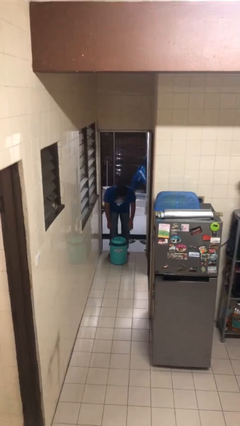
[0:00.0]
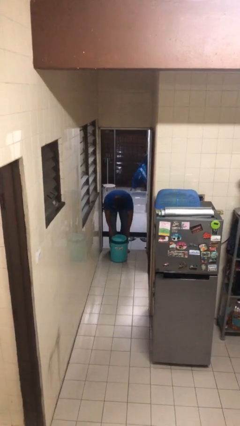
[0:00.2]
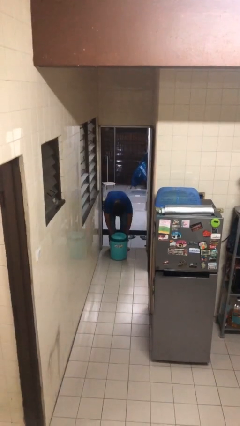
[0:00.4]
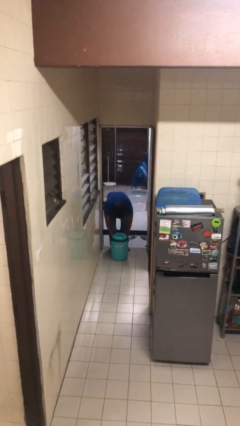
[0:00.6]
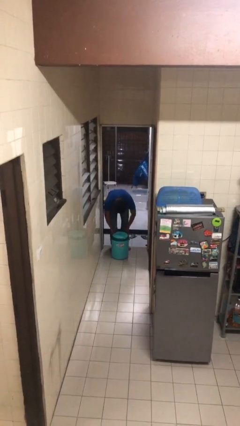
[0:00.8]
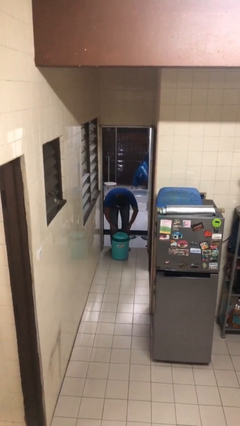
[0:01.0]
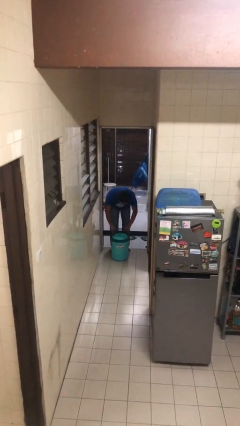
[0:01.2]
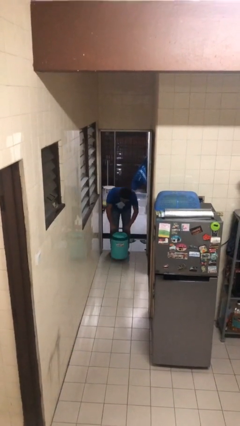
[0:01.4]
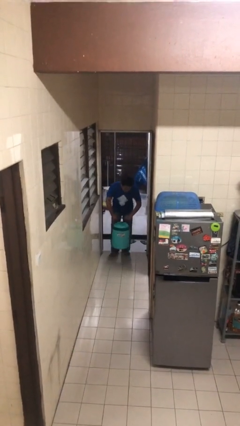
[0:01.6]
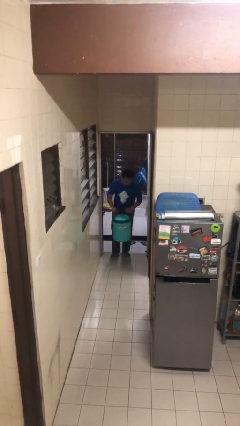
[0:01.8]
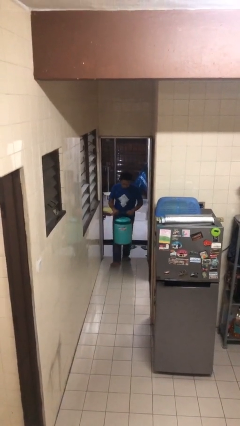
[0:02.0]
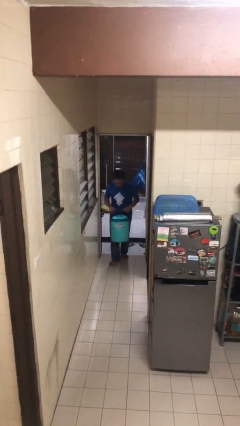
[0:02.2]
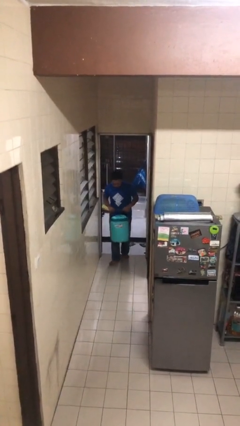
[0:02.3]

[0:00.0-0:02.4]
person picks up object from floor

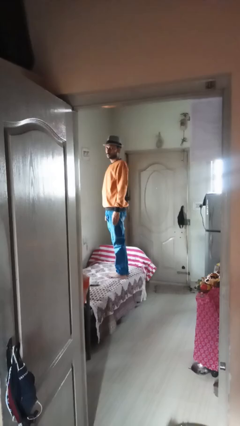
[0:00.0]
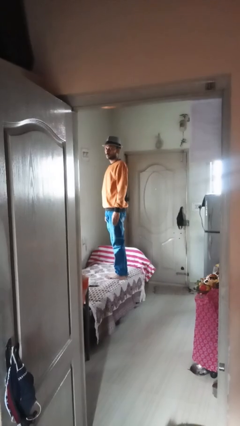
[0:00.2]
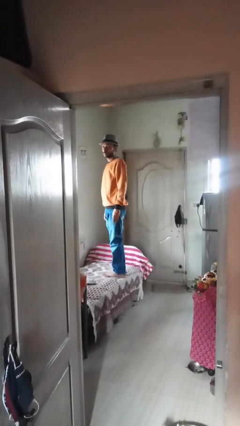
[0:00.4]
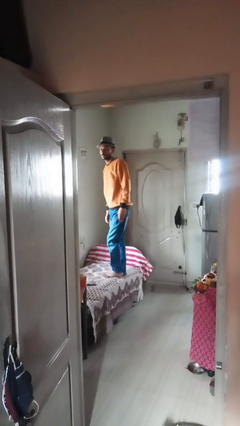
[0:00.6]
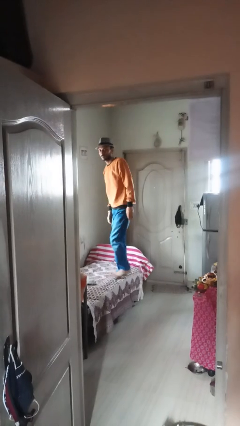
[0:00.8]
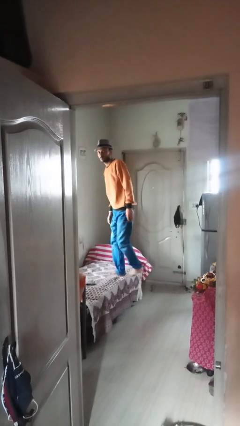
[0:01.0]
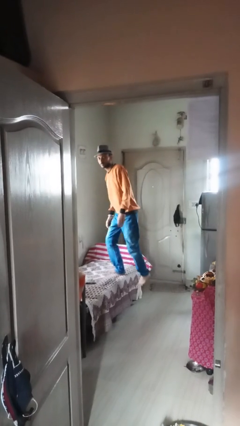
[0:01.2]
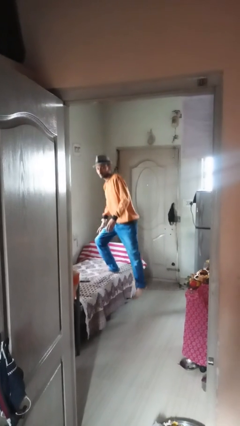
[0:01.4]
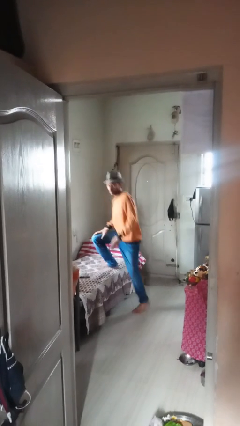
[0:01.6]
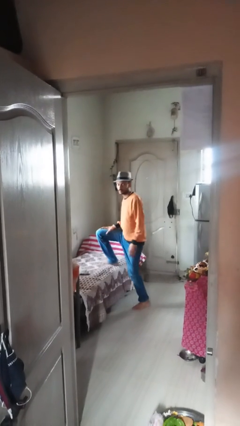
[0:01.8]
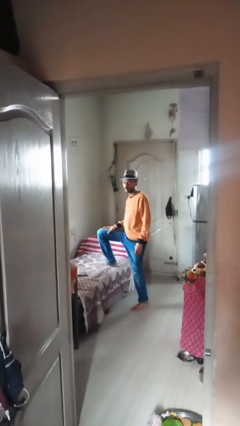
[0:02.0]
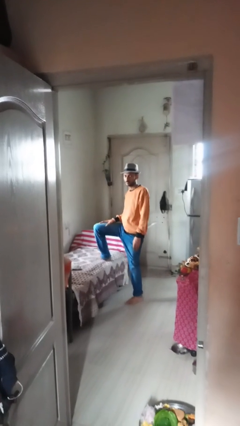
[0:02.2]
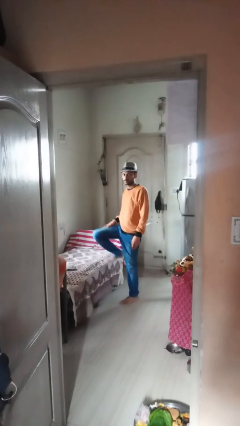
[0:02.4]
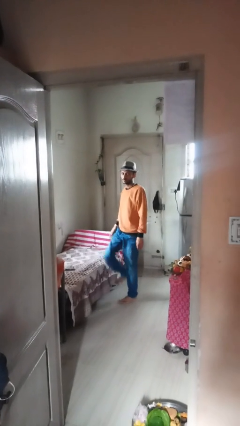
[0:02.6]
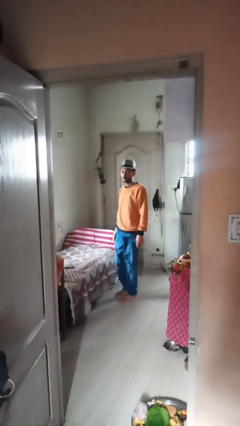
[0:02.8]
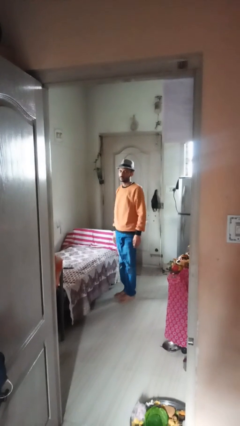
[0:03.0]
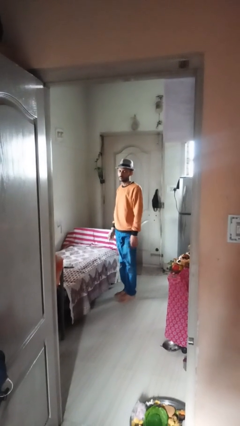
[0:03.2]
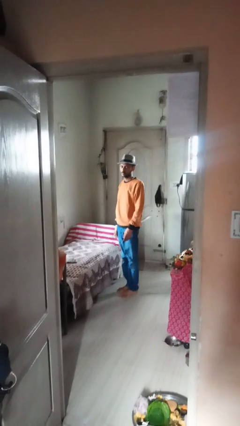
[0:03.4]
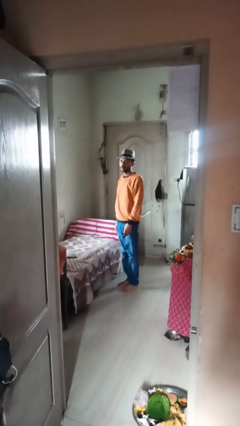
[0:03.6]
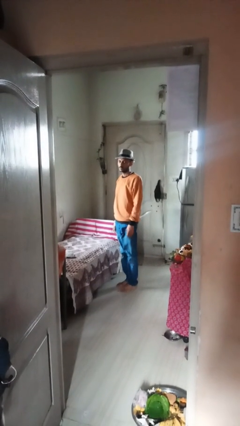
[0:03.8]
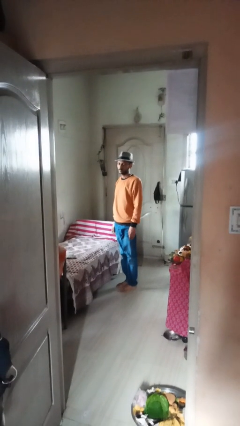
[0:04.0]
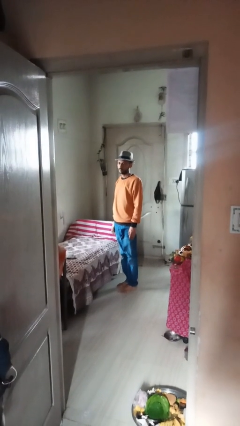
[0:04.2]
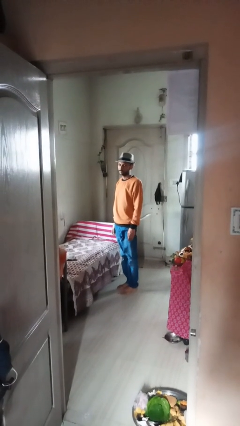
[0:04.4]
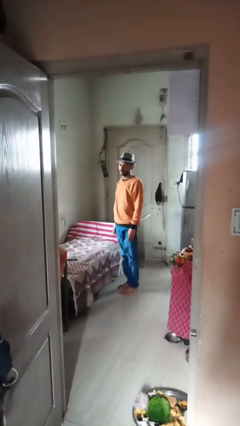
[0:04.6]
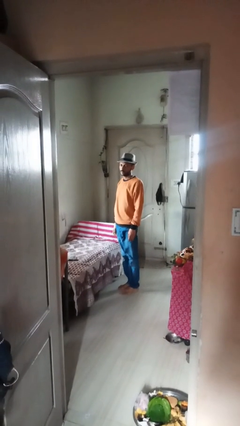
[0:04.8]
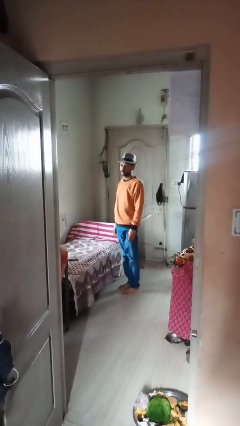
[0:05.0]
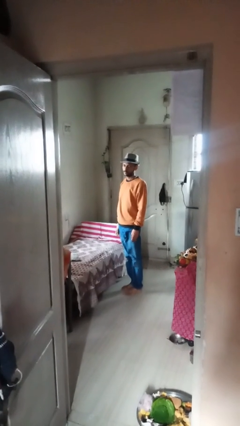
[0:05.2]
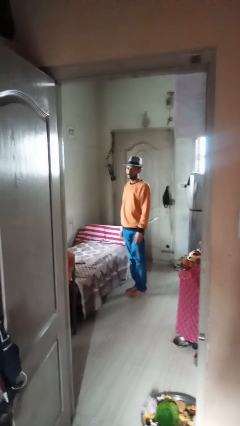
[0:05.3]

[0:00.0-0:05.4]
person climbs off couch

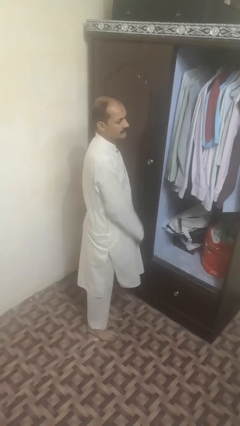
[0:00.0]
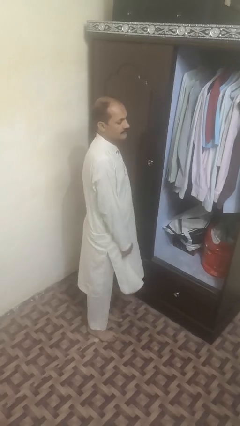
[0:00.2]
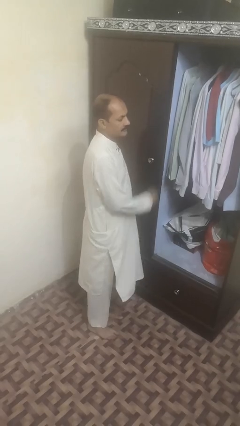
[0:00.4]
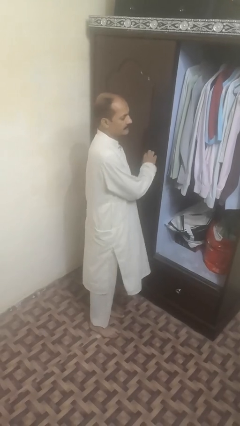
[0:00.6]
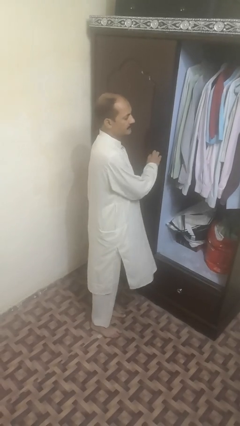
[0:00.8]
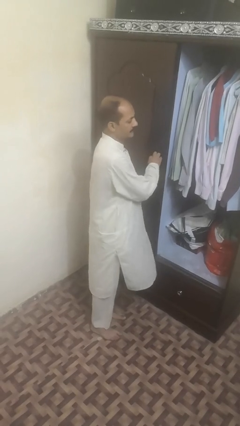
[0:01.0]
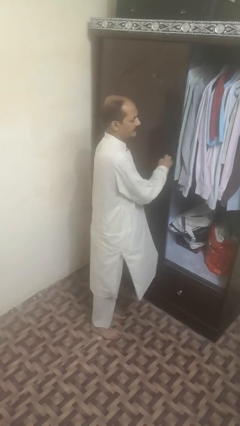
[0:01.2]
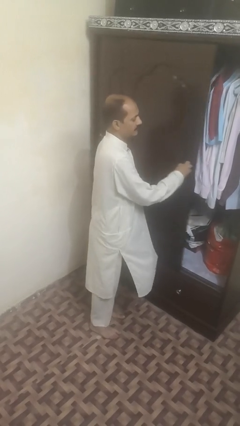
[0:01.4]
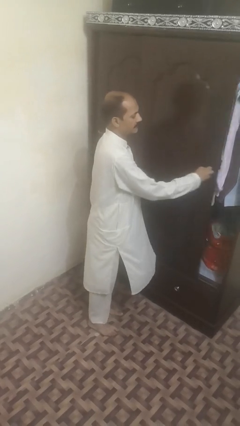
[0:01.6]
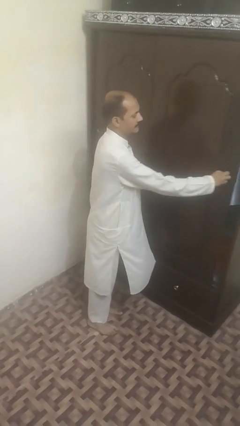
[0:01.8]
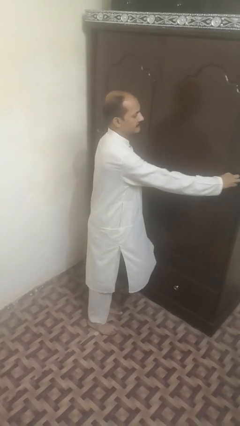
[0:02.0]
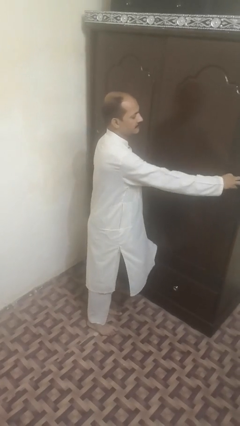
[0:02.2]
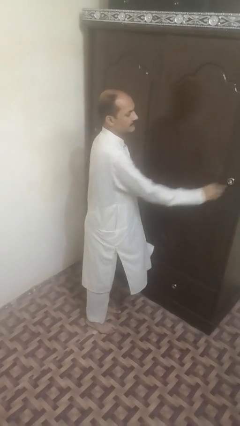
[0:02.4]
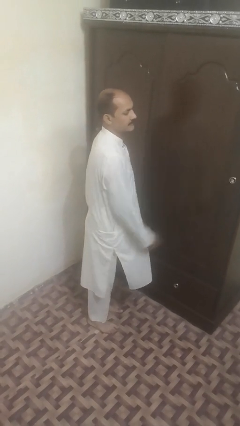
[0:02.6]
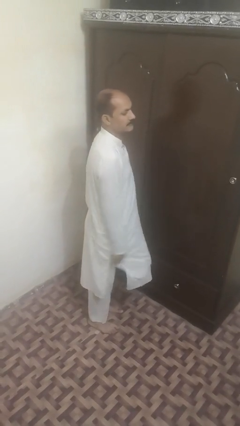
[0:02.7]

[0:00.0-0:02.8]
person closes sliding door

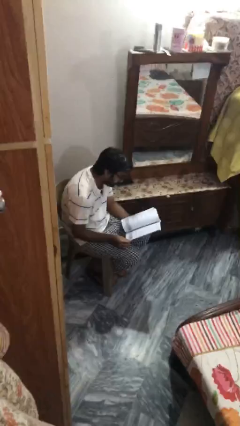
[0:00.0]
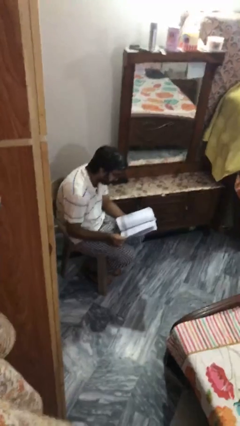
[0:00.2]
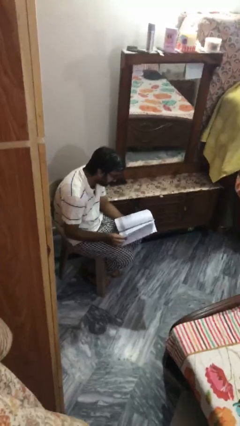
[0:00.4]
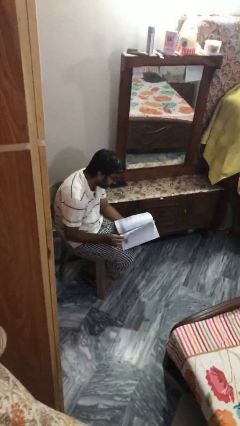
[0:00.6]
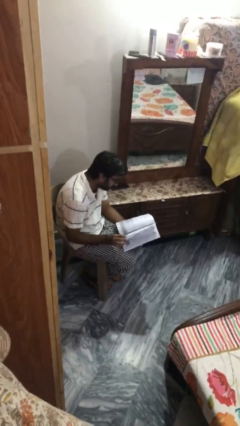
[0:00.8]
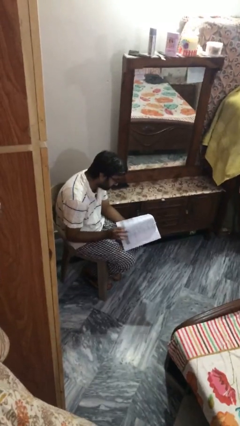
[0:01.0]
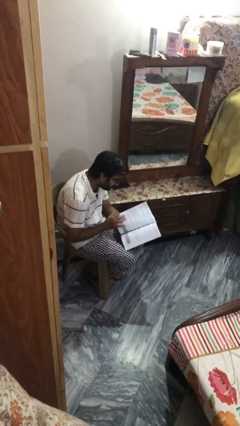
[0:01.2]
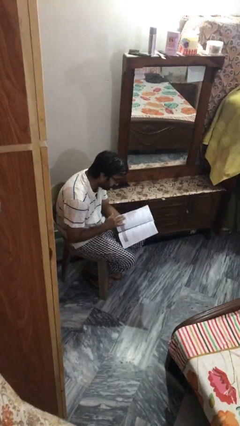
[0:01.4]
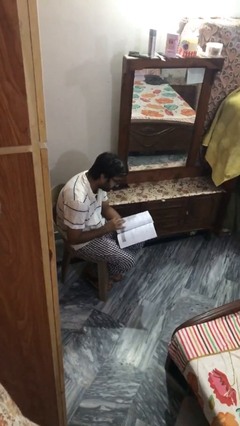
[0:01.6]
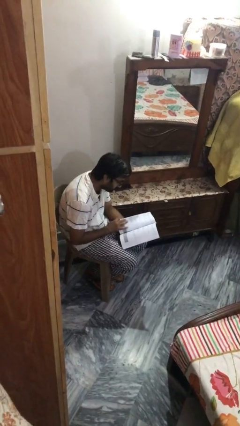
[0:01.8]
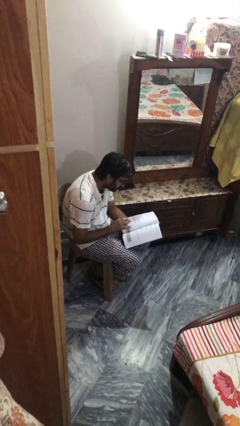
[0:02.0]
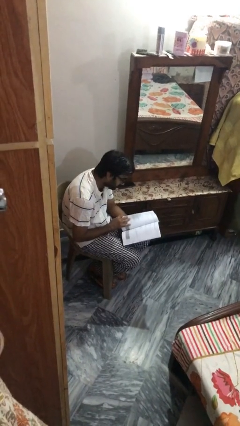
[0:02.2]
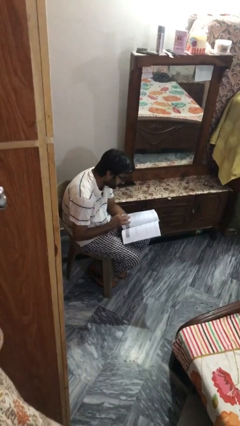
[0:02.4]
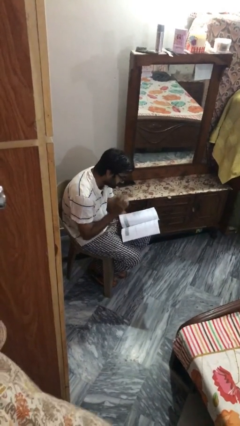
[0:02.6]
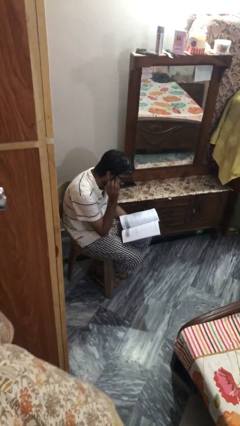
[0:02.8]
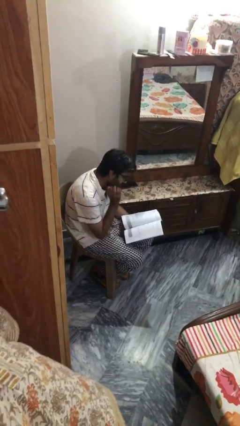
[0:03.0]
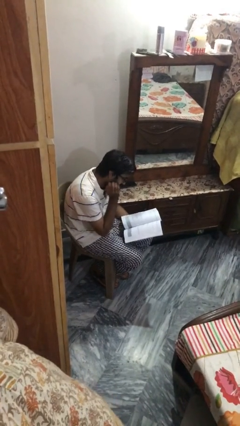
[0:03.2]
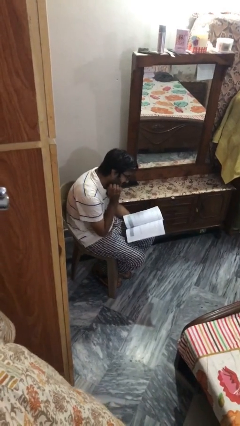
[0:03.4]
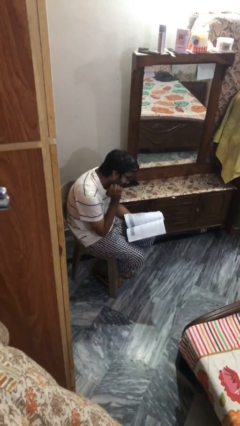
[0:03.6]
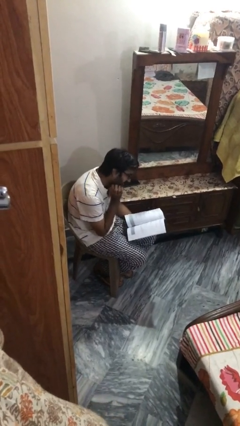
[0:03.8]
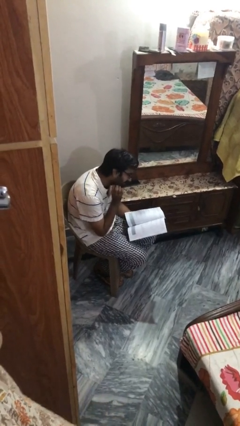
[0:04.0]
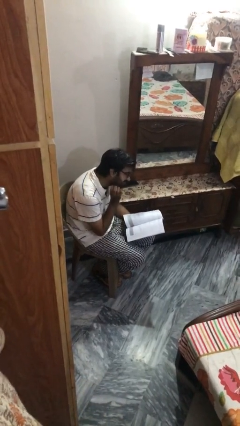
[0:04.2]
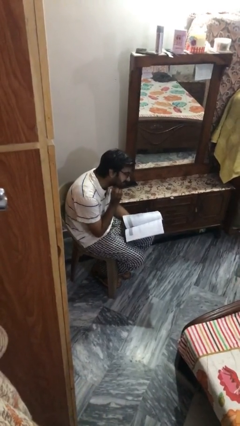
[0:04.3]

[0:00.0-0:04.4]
person reads document

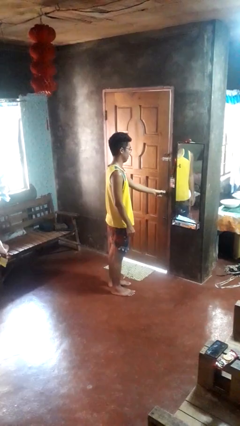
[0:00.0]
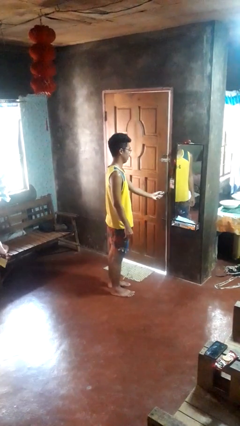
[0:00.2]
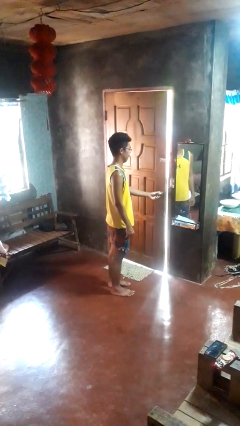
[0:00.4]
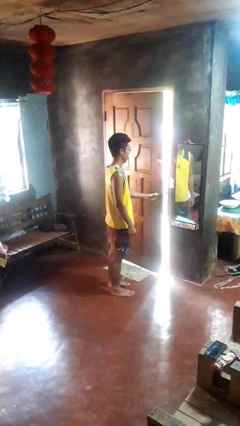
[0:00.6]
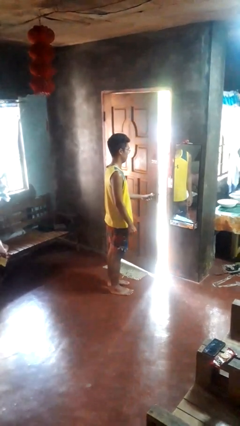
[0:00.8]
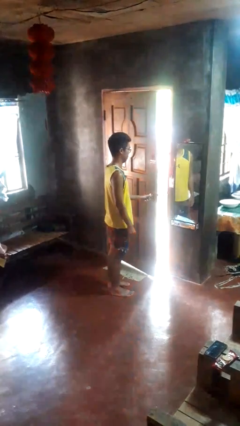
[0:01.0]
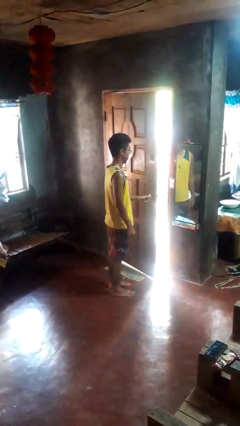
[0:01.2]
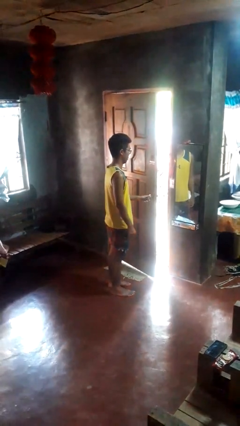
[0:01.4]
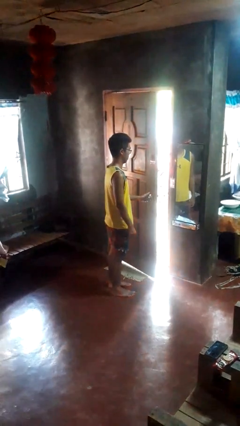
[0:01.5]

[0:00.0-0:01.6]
person opens facility door

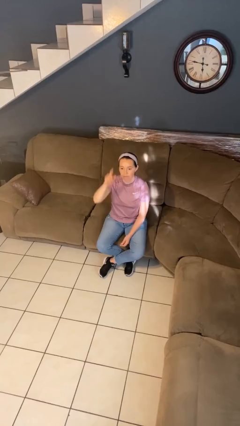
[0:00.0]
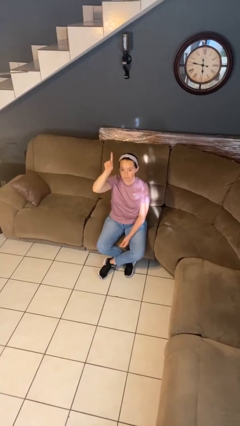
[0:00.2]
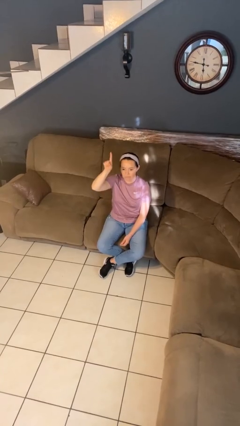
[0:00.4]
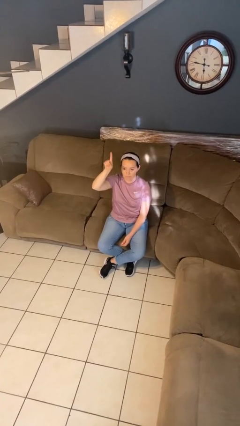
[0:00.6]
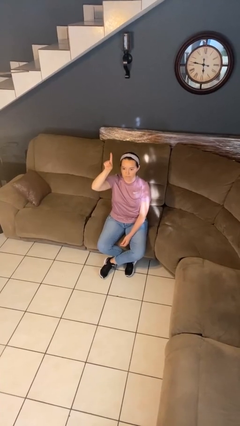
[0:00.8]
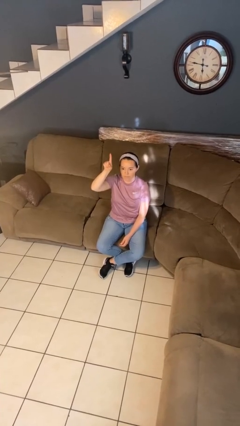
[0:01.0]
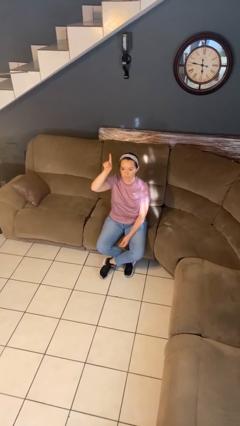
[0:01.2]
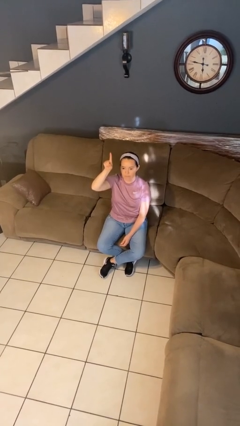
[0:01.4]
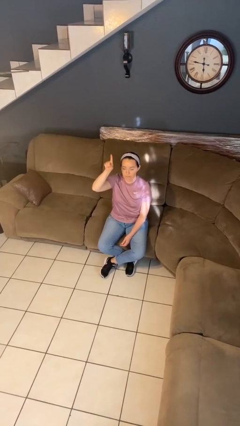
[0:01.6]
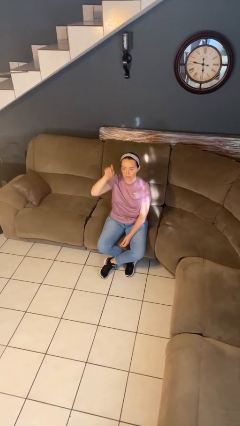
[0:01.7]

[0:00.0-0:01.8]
person gestures number one
